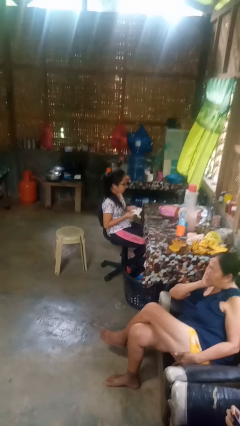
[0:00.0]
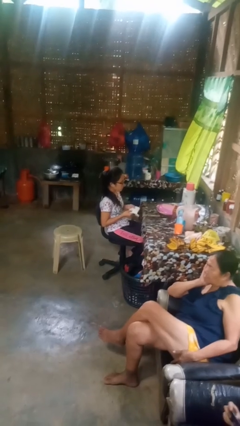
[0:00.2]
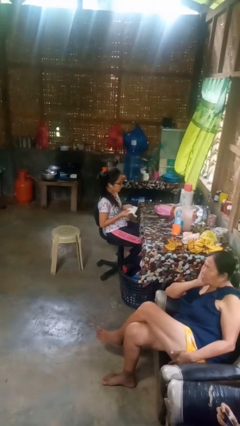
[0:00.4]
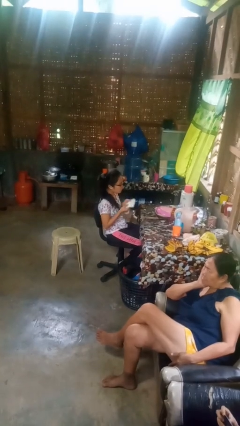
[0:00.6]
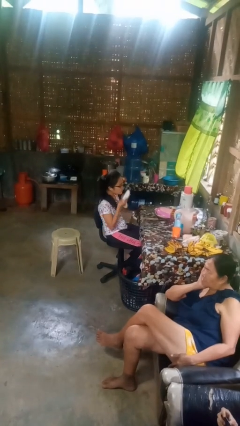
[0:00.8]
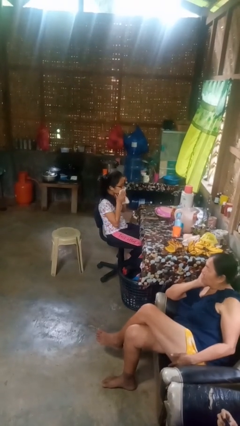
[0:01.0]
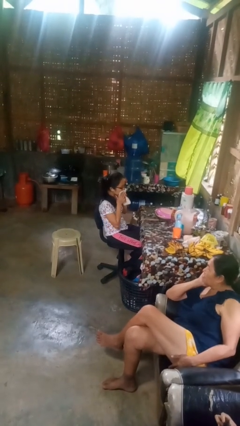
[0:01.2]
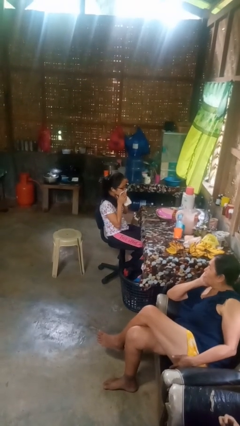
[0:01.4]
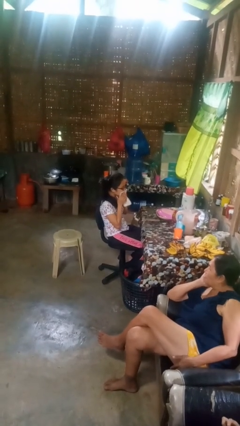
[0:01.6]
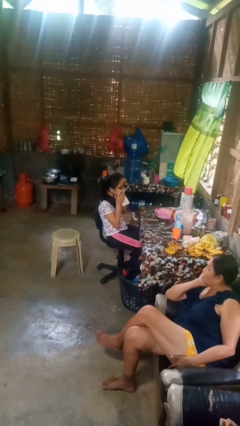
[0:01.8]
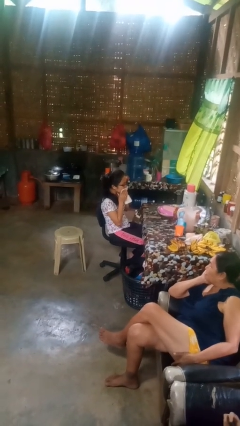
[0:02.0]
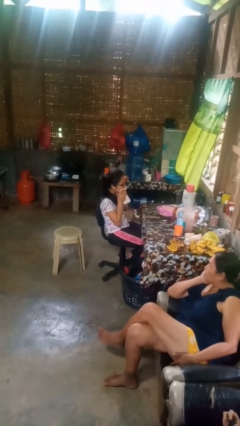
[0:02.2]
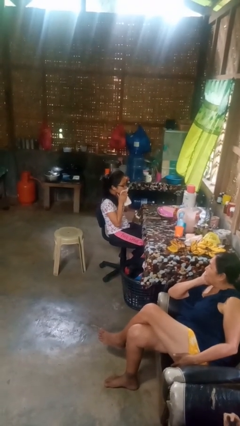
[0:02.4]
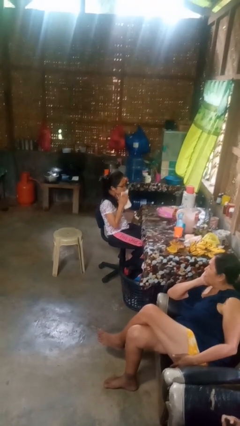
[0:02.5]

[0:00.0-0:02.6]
person wipes mouth with napkin

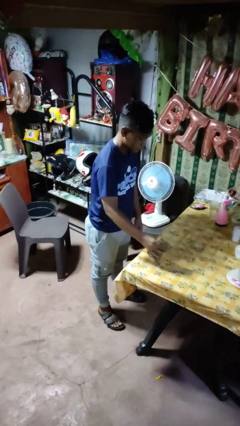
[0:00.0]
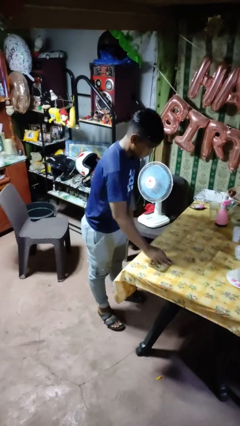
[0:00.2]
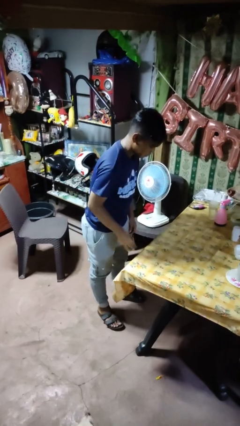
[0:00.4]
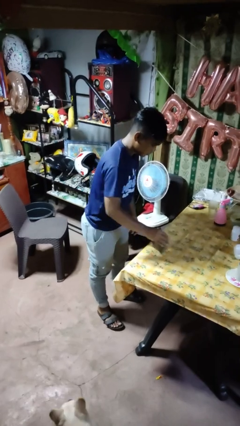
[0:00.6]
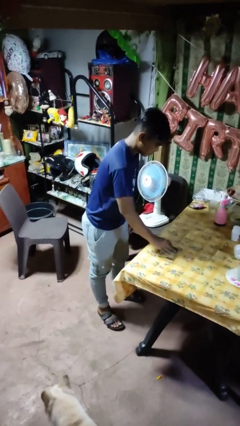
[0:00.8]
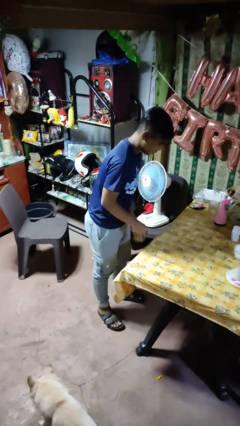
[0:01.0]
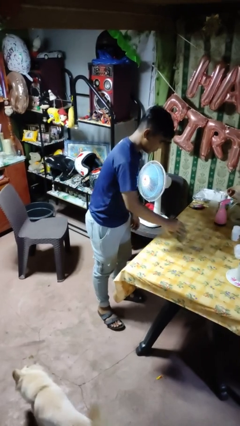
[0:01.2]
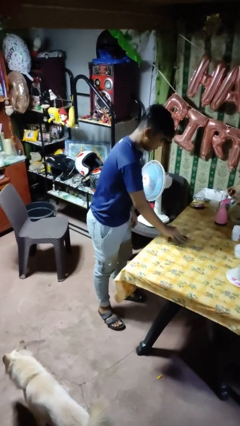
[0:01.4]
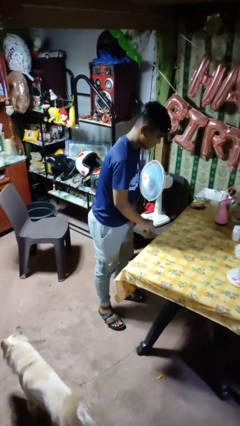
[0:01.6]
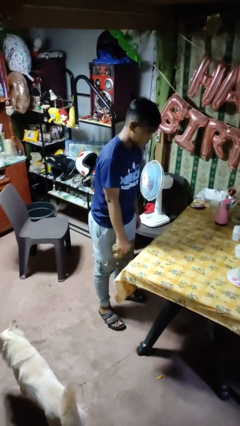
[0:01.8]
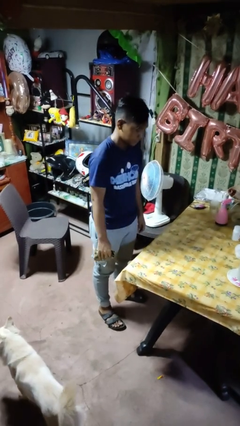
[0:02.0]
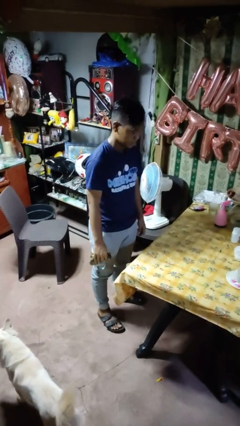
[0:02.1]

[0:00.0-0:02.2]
person cleans table with rag

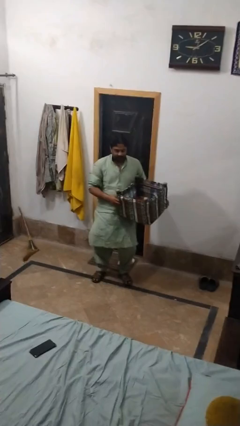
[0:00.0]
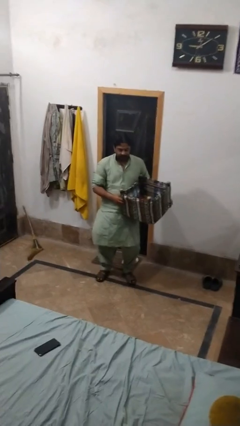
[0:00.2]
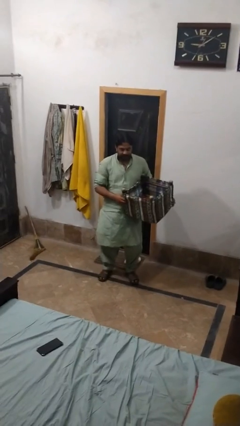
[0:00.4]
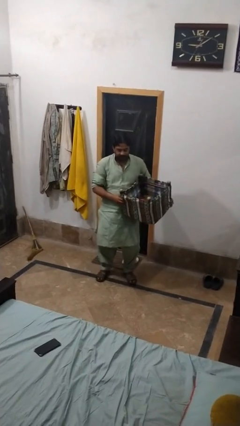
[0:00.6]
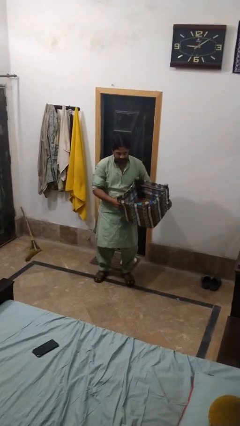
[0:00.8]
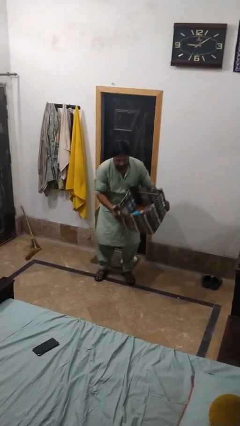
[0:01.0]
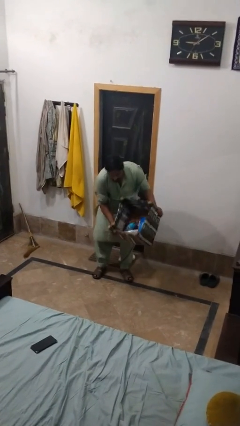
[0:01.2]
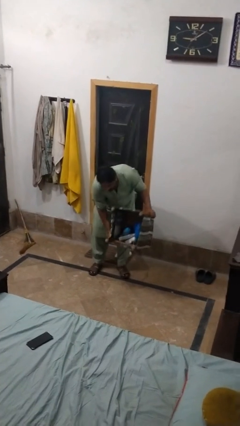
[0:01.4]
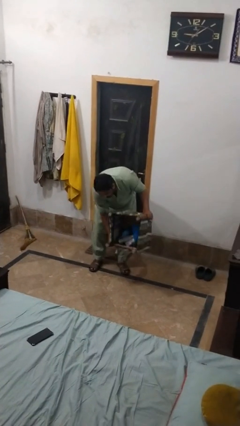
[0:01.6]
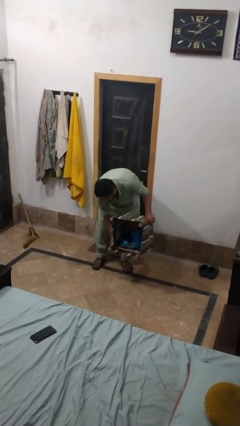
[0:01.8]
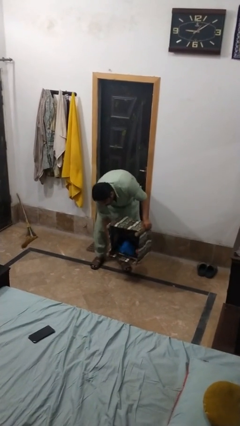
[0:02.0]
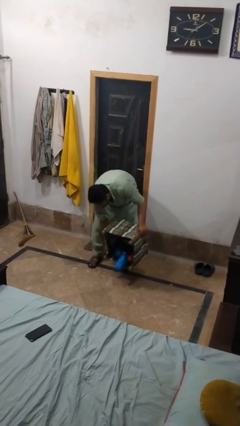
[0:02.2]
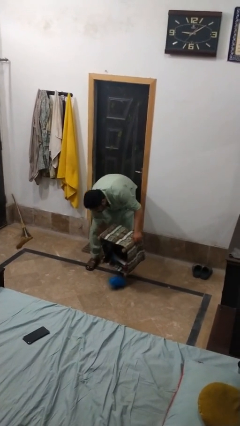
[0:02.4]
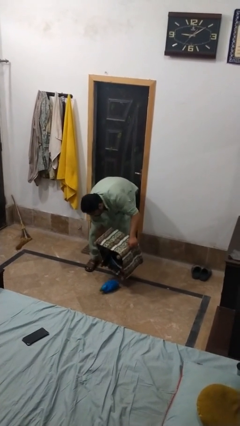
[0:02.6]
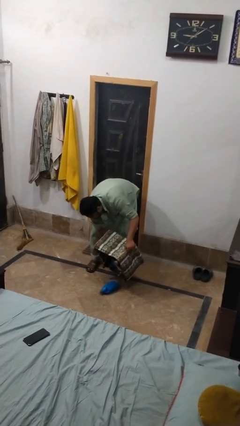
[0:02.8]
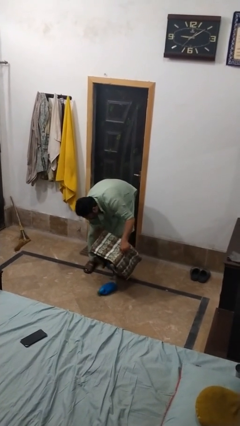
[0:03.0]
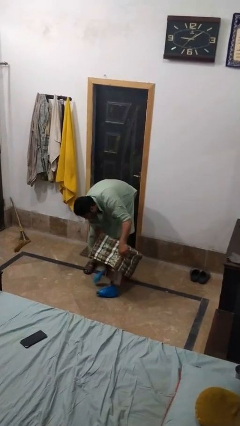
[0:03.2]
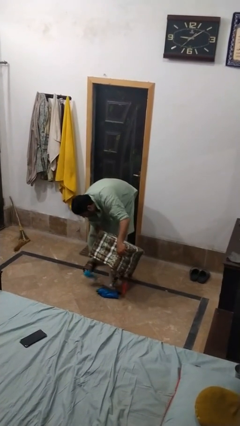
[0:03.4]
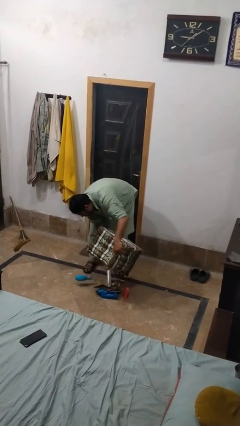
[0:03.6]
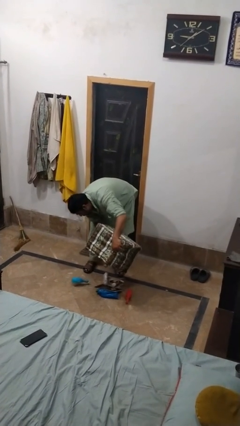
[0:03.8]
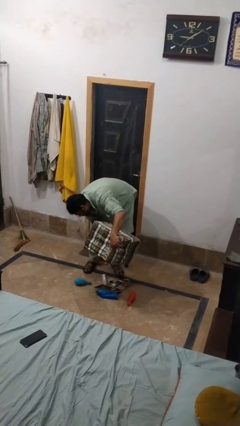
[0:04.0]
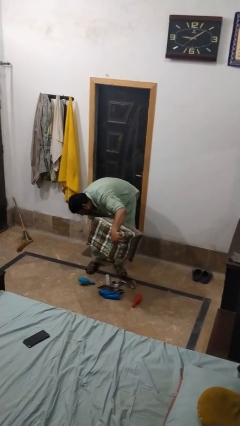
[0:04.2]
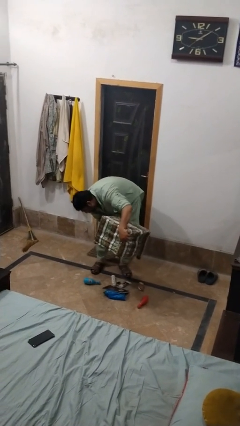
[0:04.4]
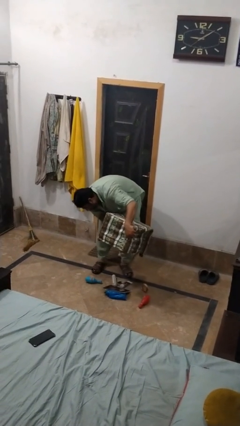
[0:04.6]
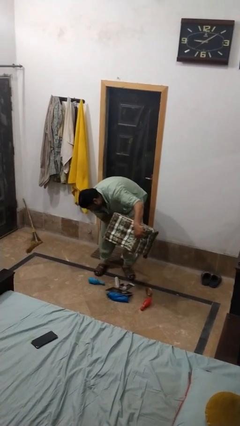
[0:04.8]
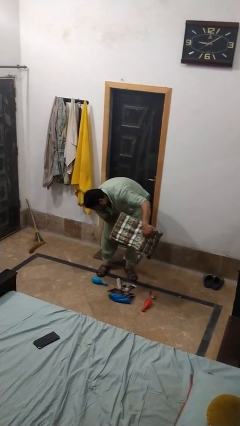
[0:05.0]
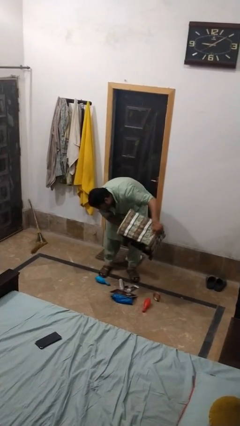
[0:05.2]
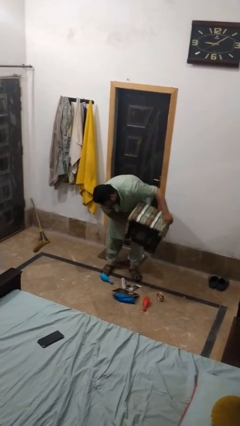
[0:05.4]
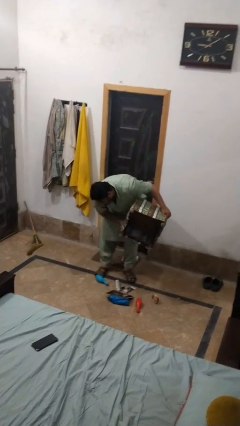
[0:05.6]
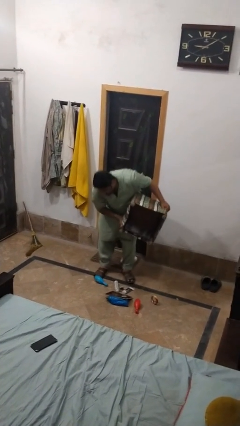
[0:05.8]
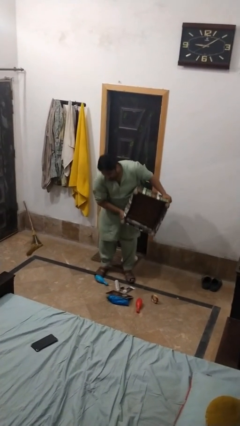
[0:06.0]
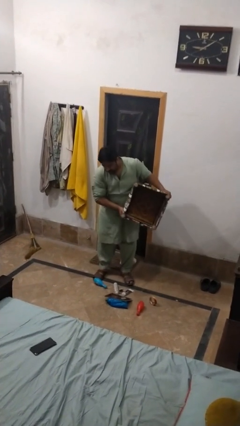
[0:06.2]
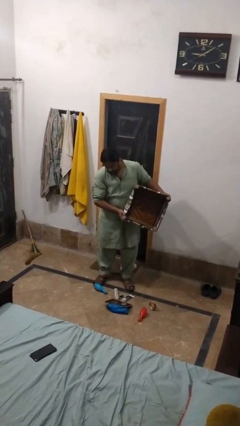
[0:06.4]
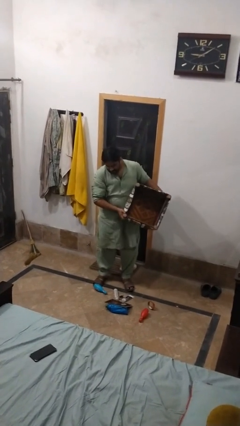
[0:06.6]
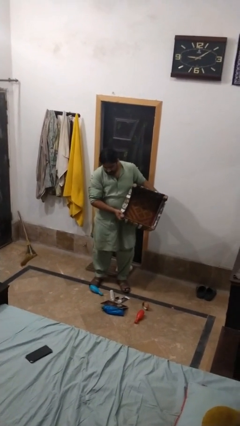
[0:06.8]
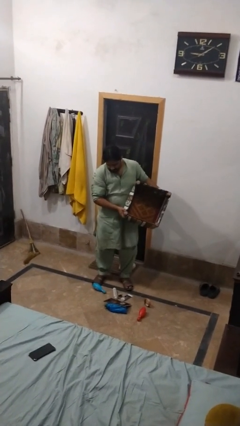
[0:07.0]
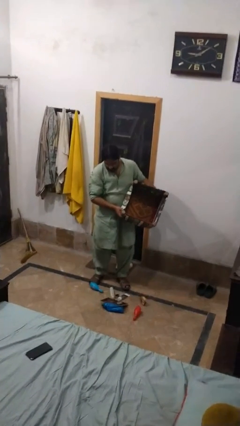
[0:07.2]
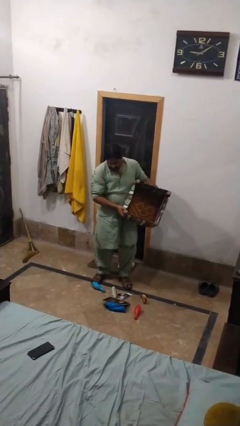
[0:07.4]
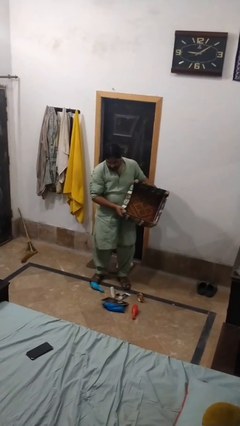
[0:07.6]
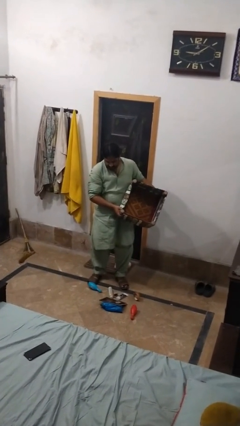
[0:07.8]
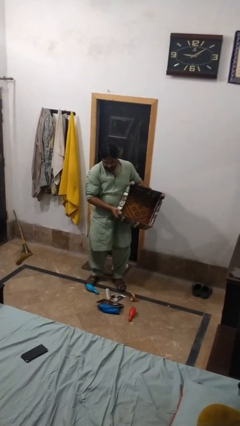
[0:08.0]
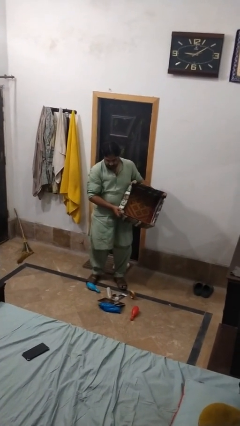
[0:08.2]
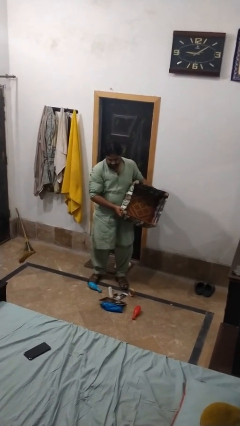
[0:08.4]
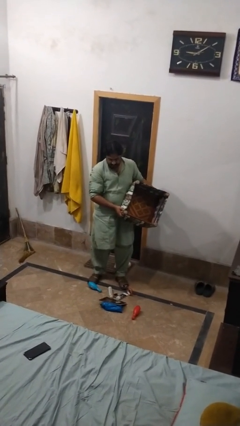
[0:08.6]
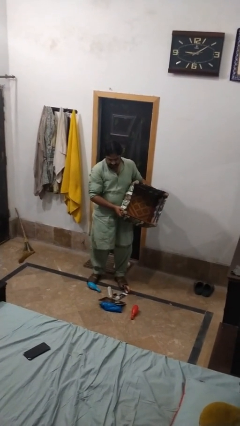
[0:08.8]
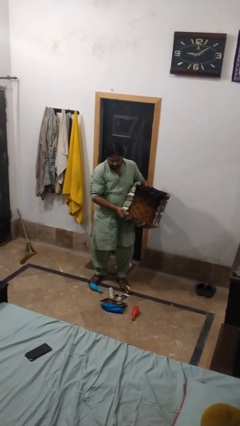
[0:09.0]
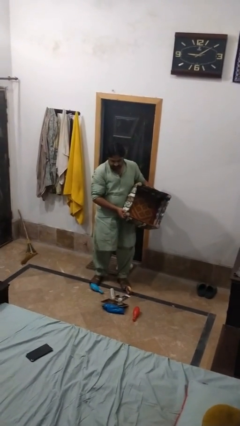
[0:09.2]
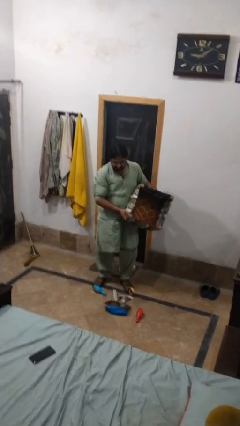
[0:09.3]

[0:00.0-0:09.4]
person unloads box onto floor

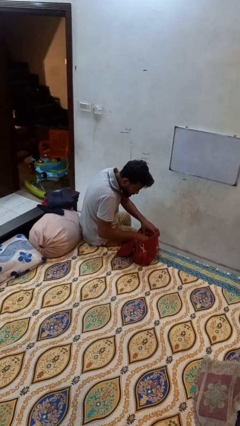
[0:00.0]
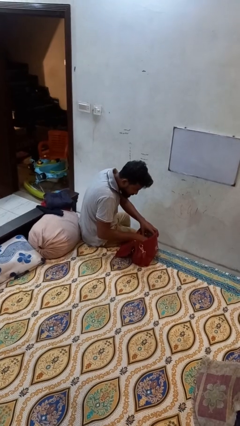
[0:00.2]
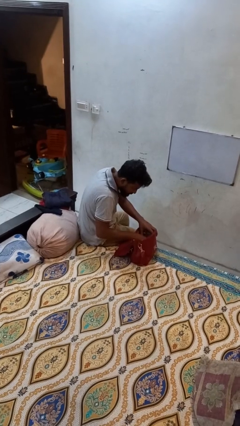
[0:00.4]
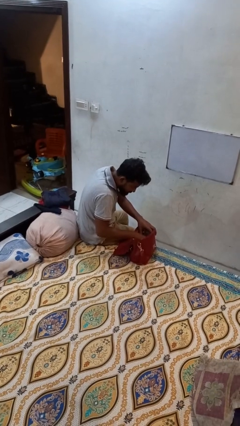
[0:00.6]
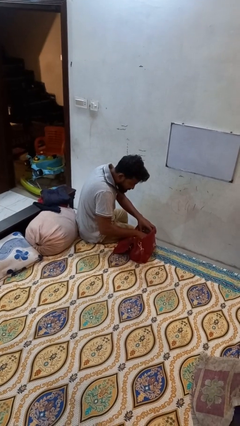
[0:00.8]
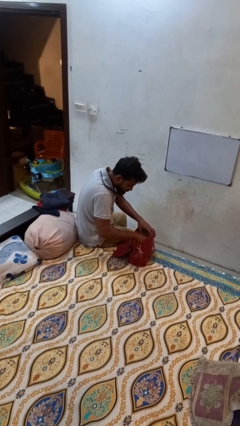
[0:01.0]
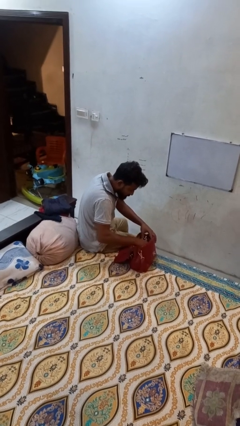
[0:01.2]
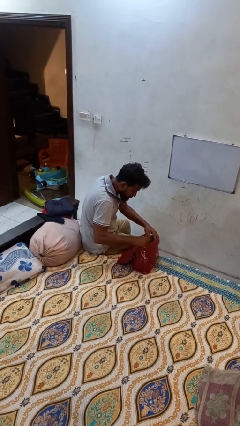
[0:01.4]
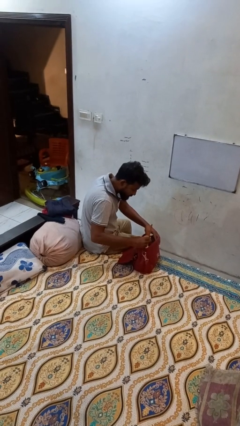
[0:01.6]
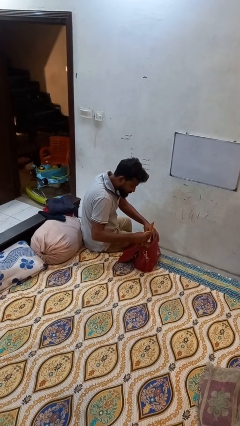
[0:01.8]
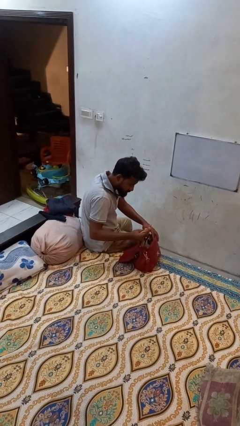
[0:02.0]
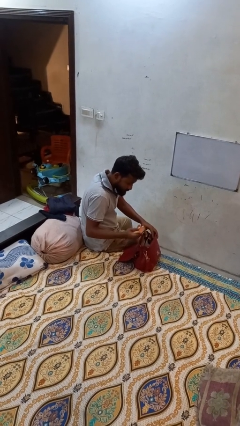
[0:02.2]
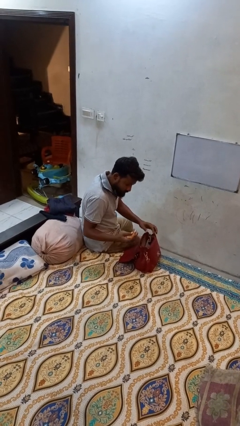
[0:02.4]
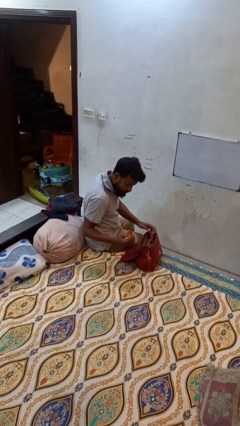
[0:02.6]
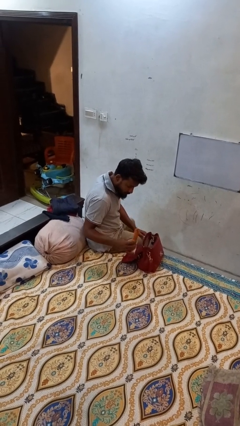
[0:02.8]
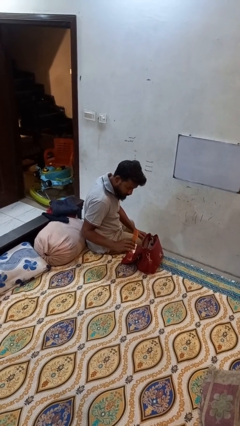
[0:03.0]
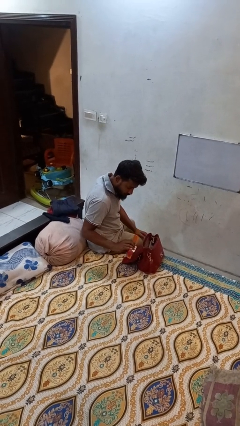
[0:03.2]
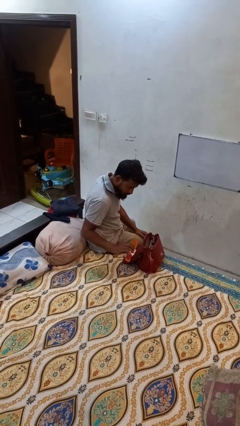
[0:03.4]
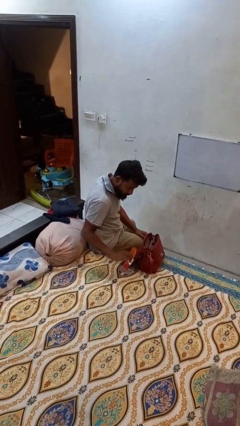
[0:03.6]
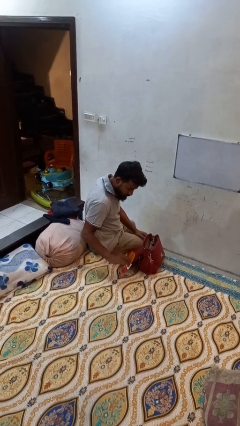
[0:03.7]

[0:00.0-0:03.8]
person takes object from purse
